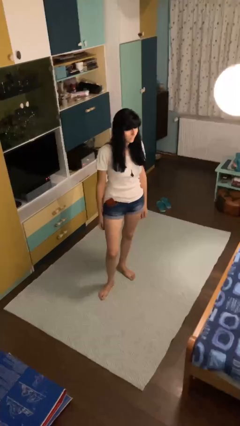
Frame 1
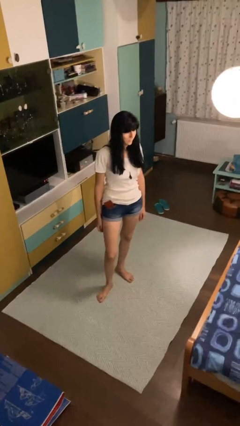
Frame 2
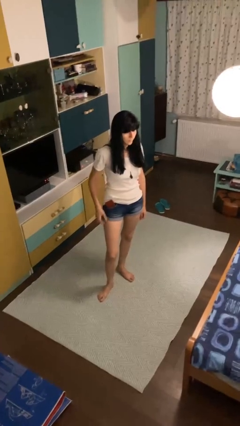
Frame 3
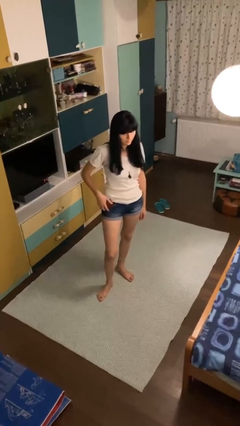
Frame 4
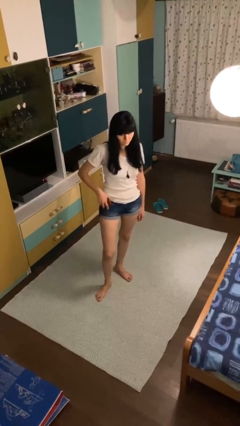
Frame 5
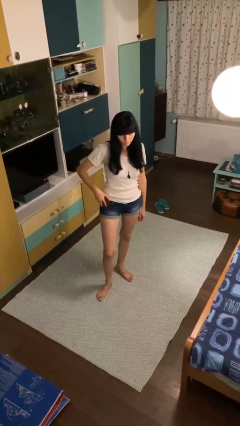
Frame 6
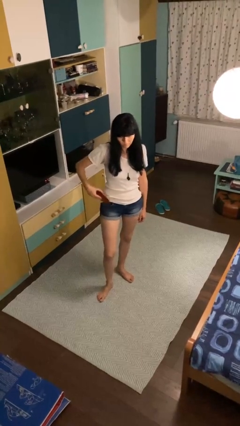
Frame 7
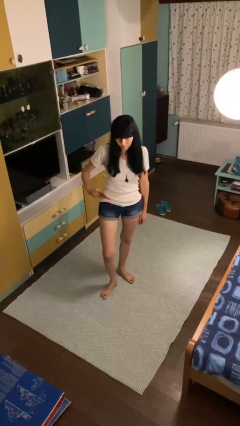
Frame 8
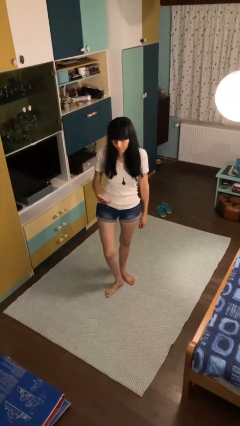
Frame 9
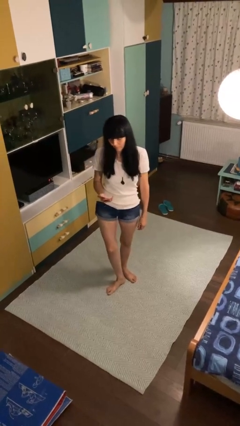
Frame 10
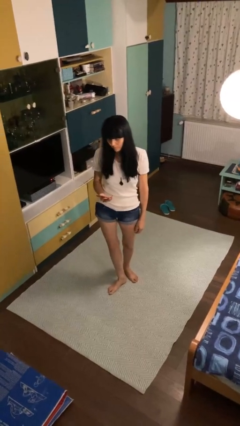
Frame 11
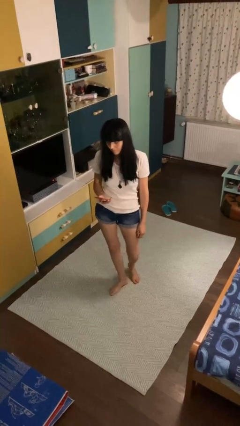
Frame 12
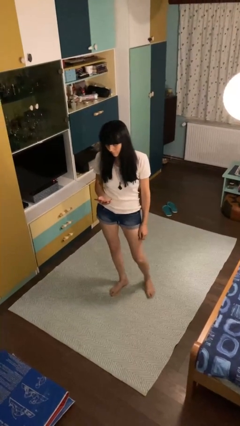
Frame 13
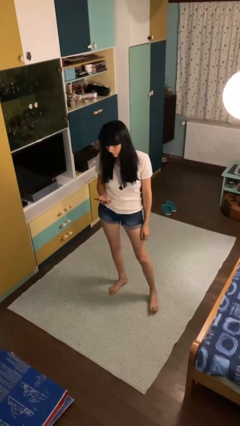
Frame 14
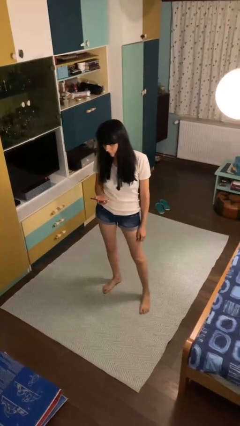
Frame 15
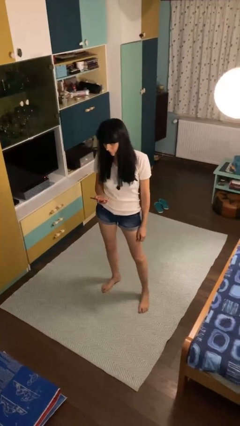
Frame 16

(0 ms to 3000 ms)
person takes phone from pocket

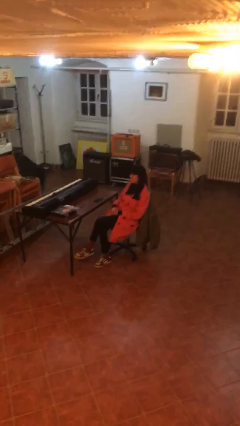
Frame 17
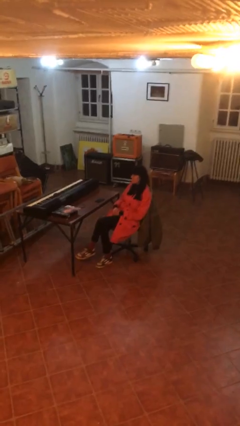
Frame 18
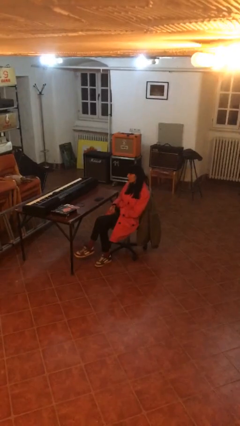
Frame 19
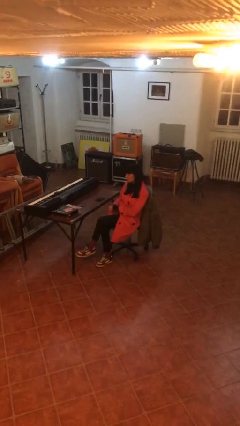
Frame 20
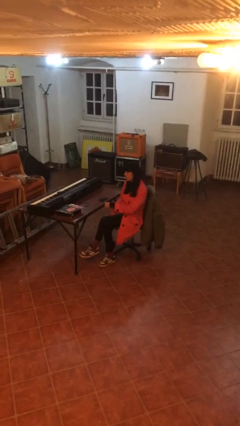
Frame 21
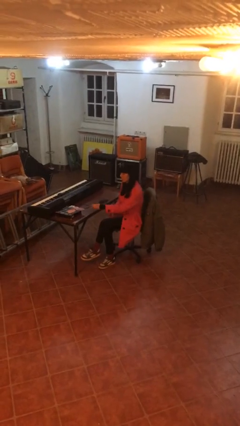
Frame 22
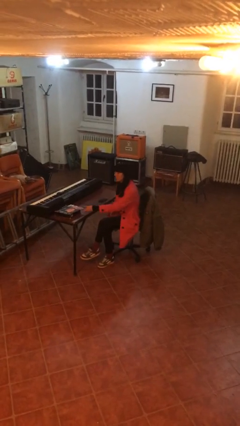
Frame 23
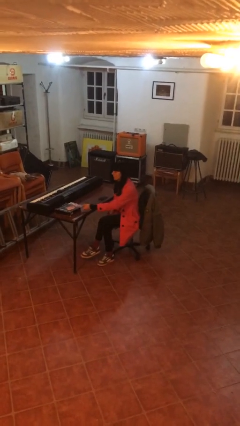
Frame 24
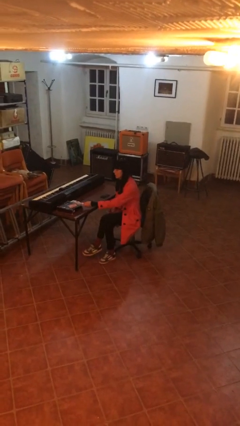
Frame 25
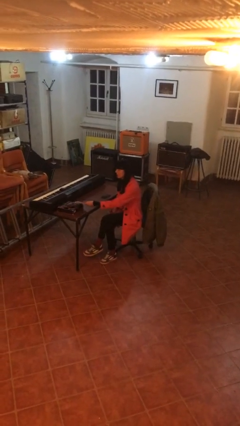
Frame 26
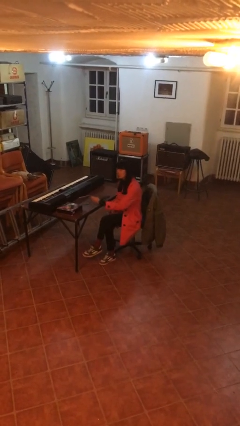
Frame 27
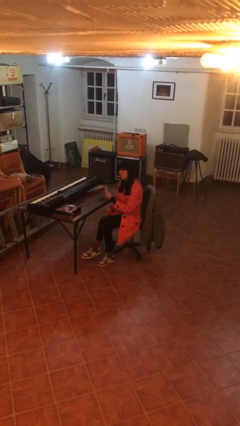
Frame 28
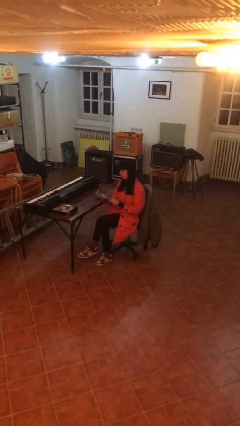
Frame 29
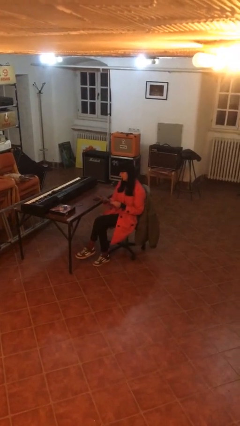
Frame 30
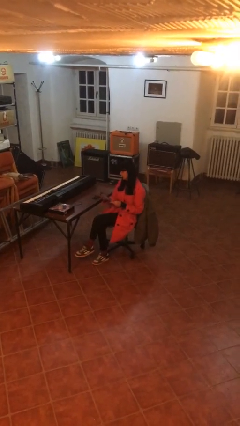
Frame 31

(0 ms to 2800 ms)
person picks up object from table

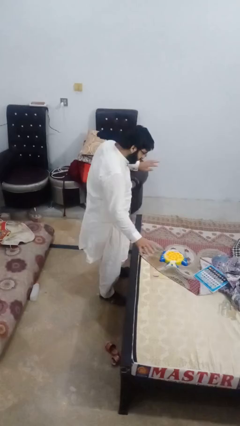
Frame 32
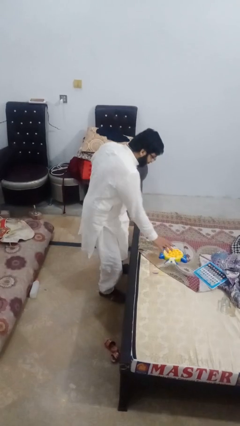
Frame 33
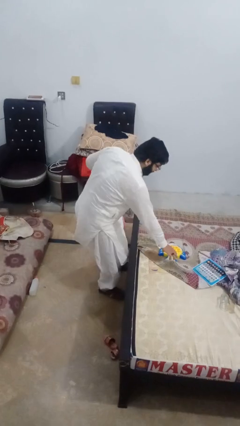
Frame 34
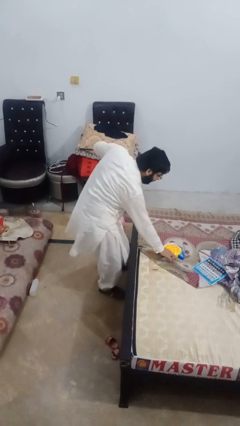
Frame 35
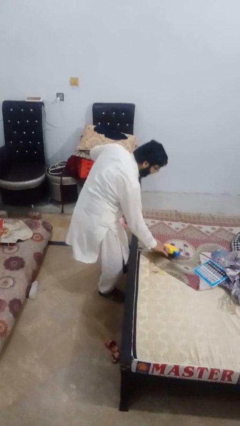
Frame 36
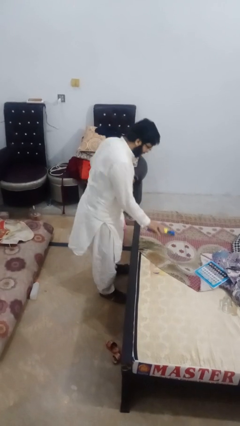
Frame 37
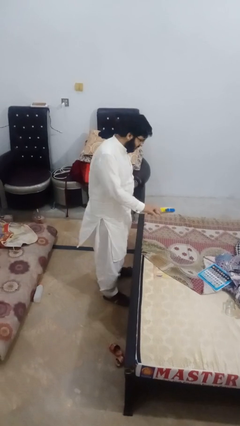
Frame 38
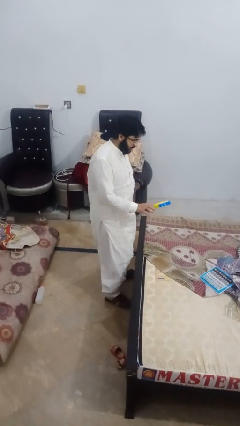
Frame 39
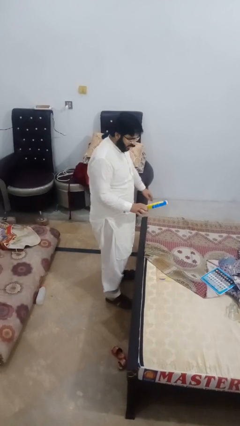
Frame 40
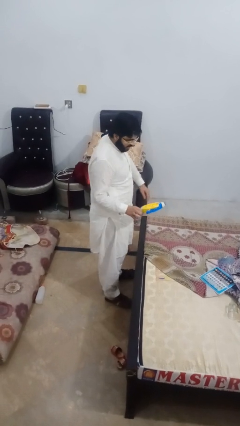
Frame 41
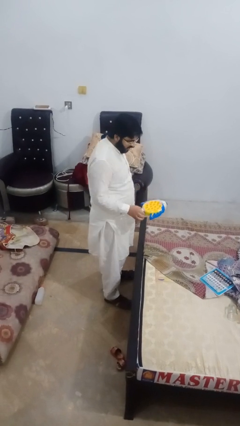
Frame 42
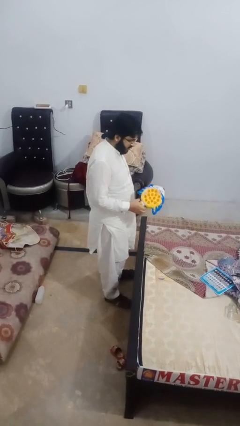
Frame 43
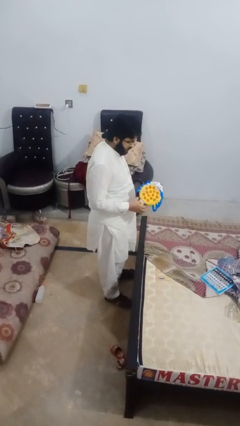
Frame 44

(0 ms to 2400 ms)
person picks up object from bed

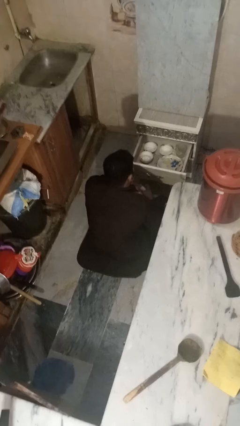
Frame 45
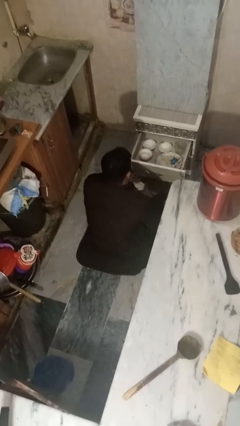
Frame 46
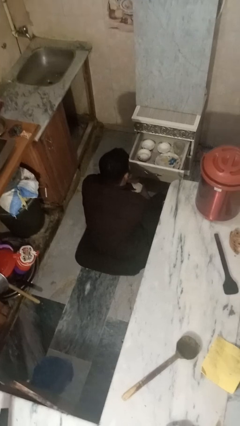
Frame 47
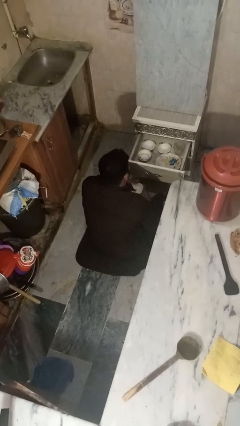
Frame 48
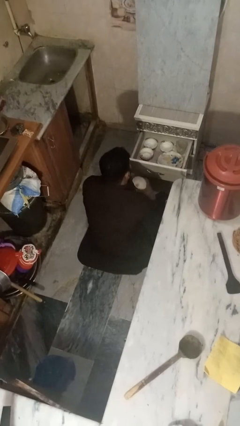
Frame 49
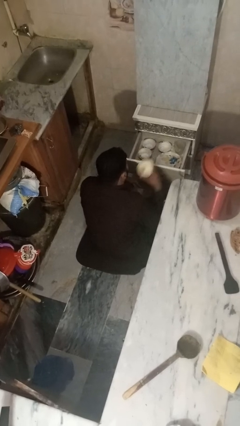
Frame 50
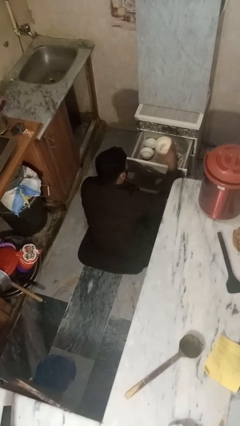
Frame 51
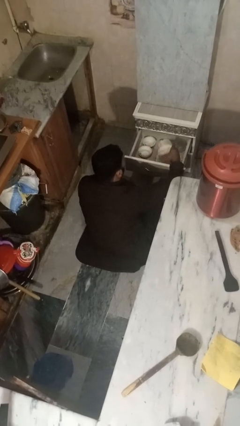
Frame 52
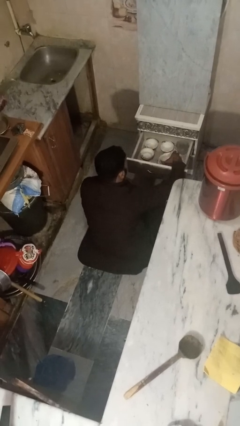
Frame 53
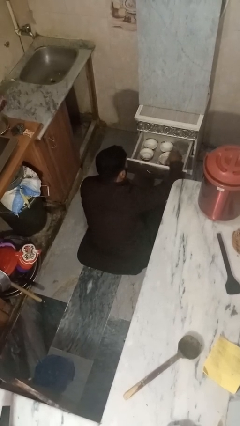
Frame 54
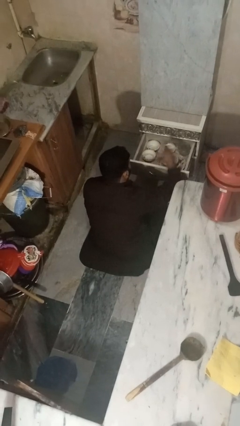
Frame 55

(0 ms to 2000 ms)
person puts object into kitchen drawer

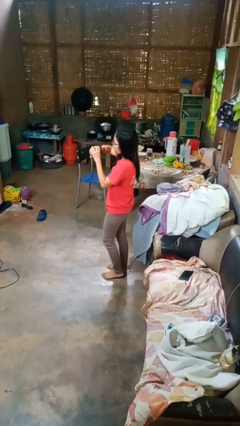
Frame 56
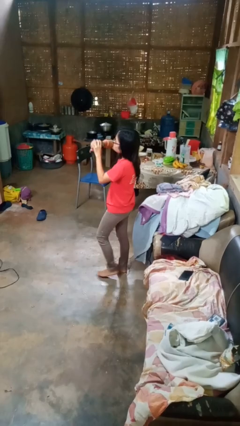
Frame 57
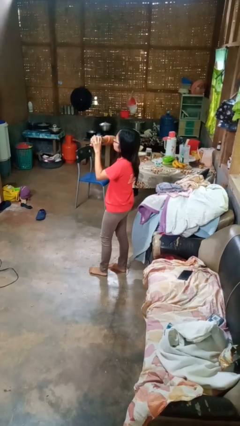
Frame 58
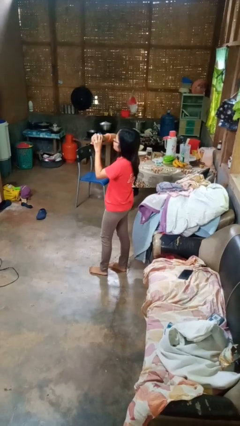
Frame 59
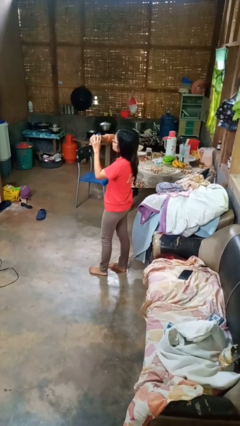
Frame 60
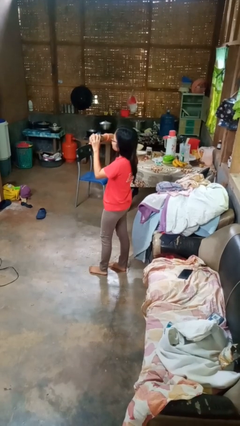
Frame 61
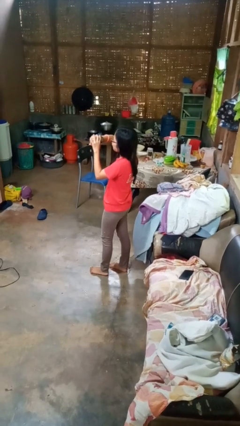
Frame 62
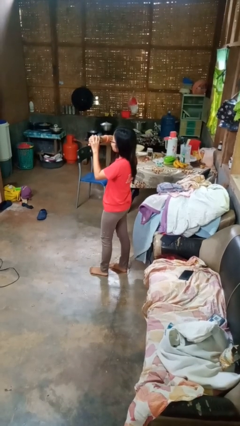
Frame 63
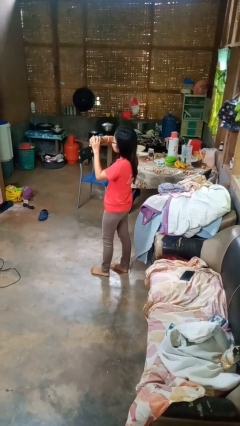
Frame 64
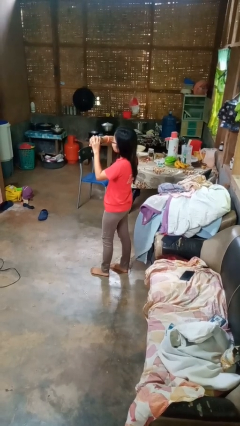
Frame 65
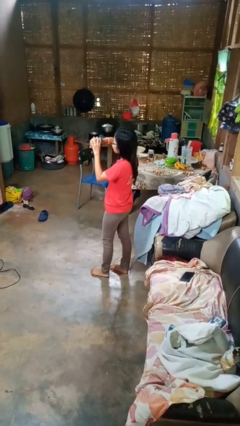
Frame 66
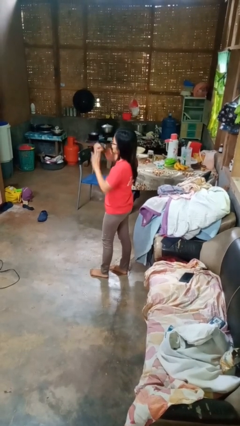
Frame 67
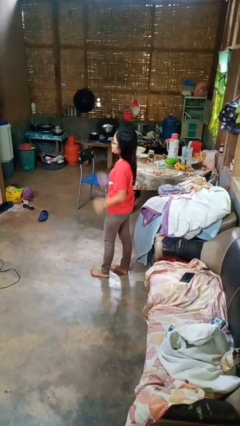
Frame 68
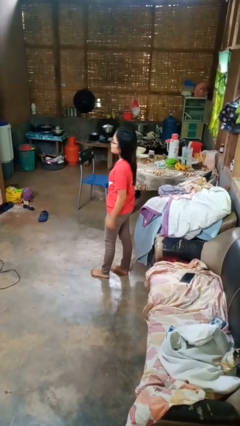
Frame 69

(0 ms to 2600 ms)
person looks at wristwatch

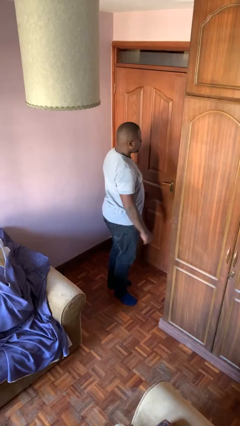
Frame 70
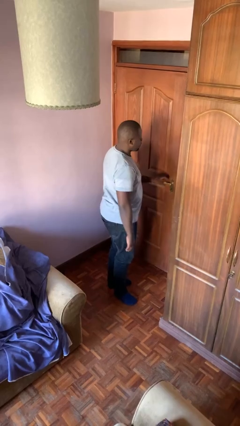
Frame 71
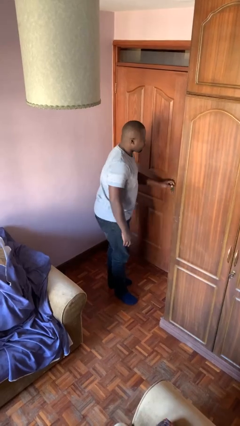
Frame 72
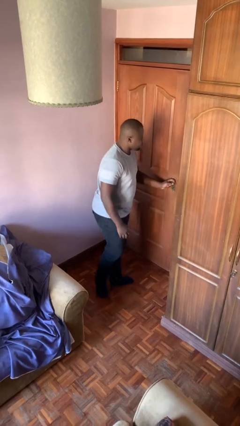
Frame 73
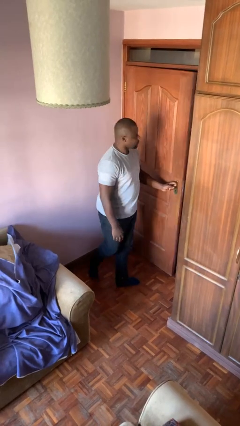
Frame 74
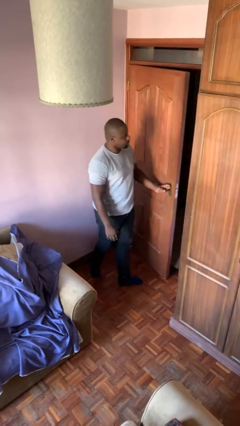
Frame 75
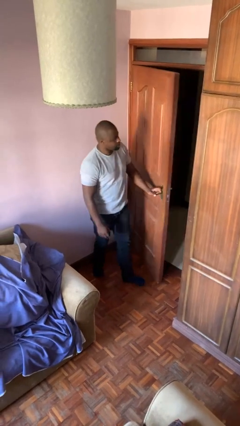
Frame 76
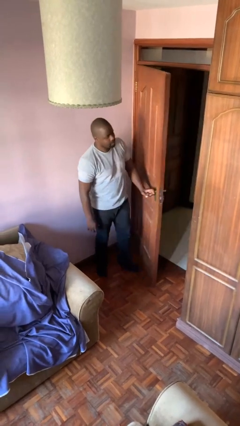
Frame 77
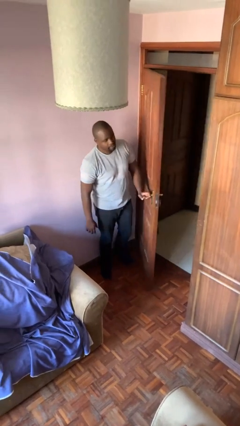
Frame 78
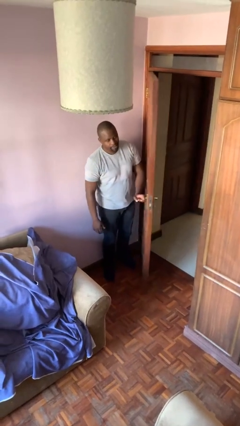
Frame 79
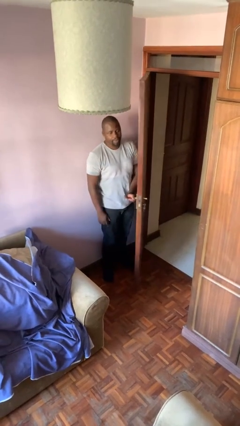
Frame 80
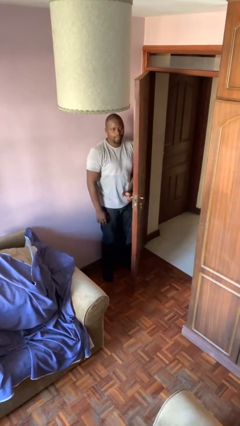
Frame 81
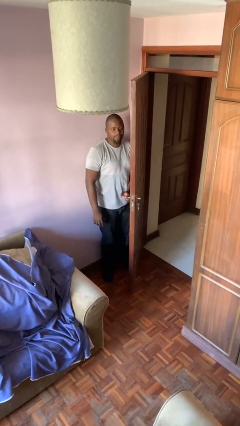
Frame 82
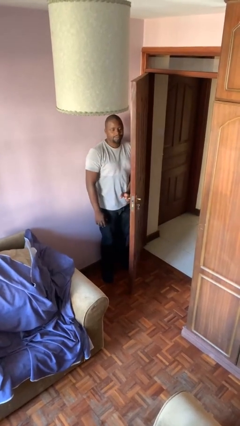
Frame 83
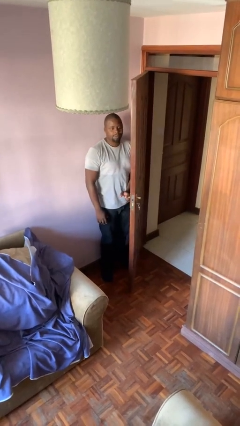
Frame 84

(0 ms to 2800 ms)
person opens facility door

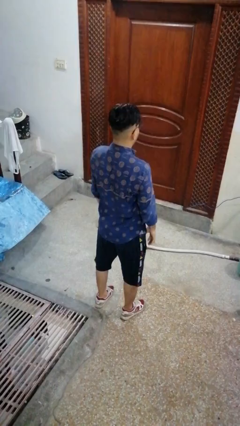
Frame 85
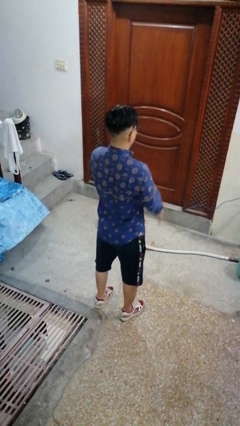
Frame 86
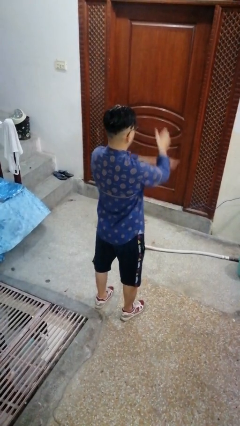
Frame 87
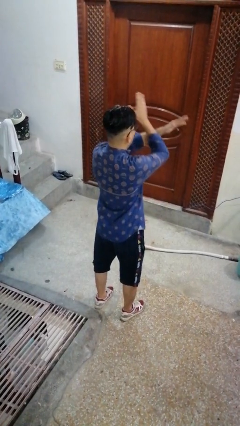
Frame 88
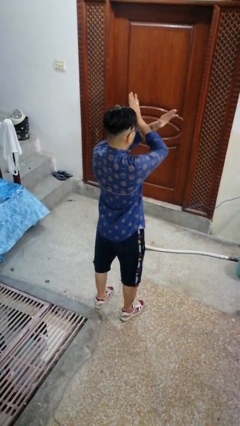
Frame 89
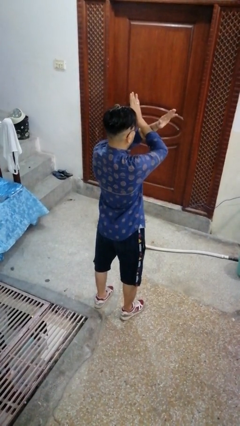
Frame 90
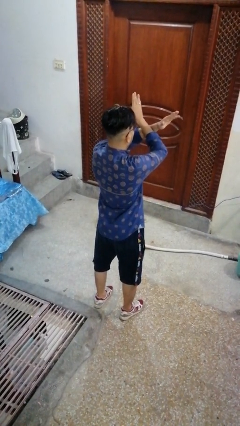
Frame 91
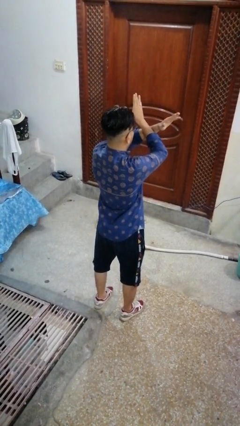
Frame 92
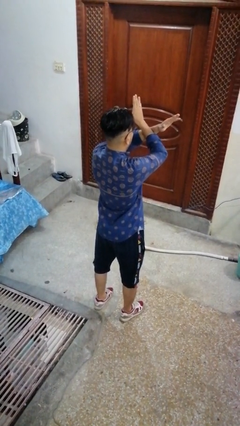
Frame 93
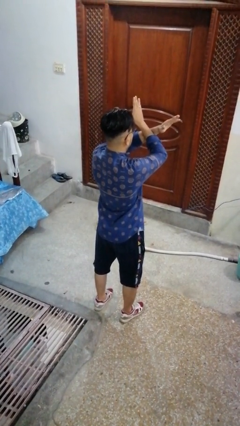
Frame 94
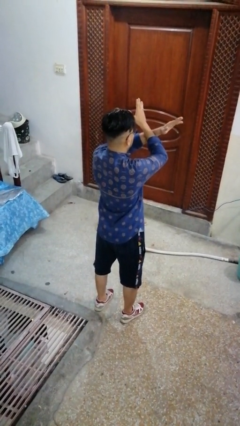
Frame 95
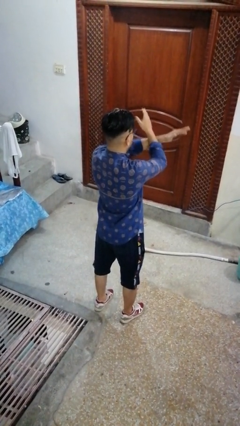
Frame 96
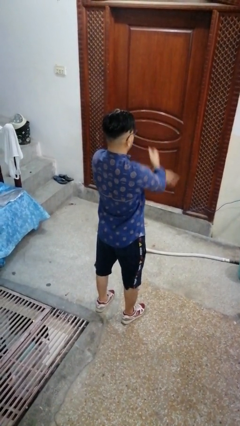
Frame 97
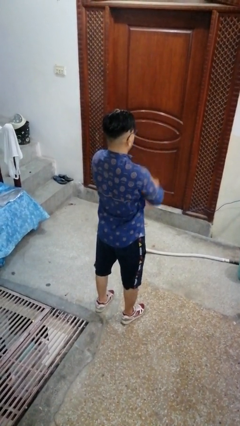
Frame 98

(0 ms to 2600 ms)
person gestures arms x
